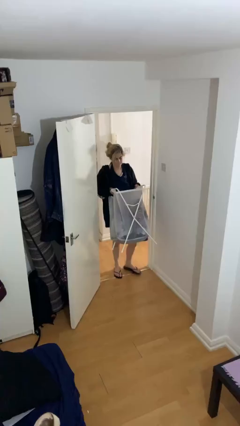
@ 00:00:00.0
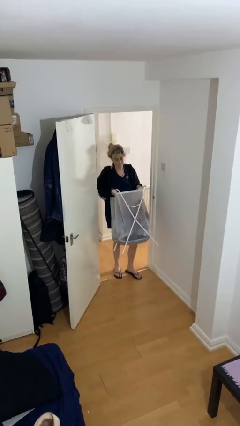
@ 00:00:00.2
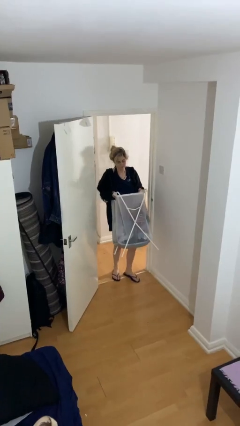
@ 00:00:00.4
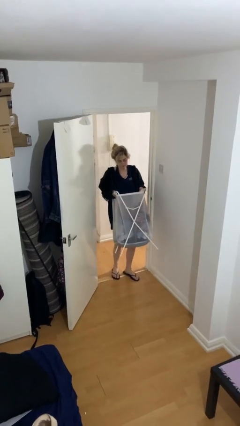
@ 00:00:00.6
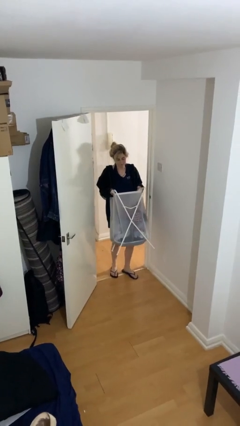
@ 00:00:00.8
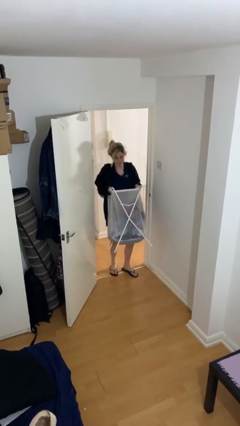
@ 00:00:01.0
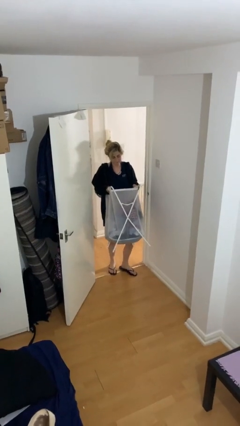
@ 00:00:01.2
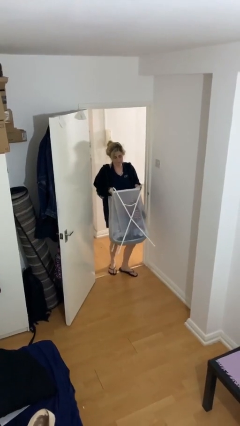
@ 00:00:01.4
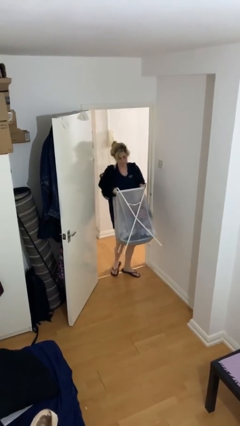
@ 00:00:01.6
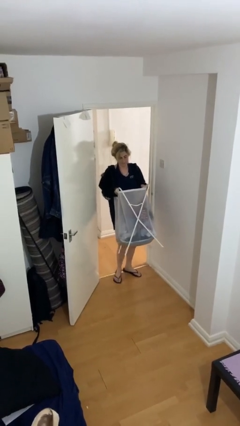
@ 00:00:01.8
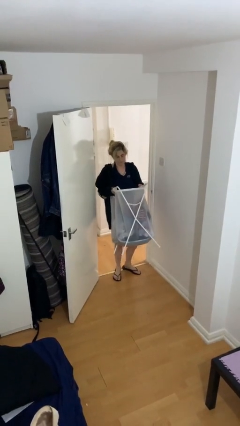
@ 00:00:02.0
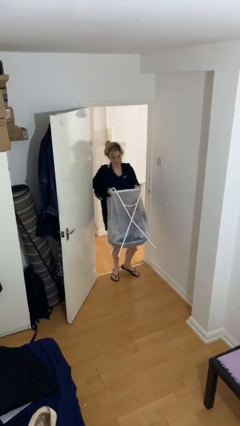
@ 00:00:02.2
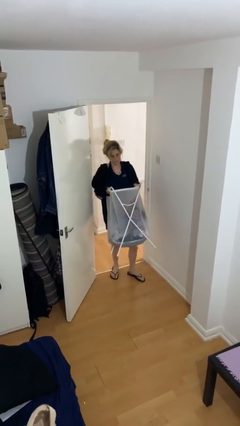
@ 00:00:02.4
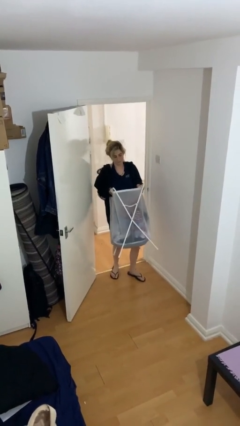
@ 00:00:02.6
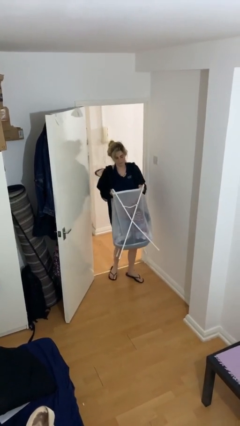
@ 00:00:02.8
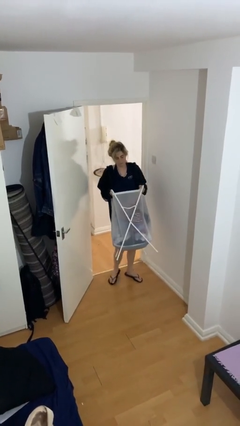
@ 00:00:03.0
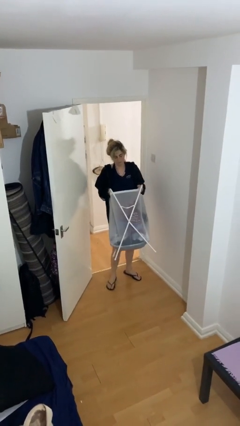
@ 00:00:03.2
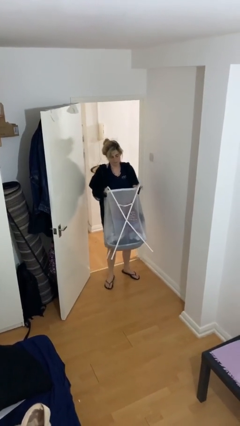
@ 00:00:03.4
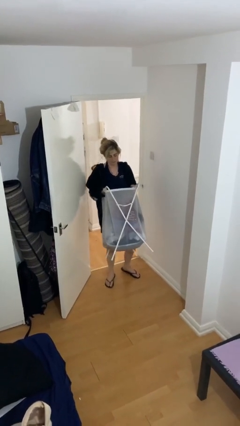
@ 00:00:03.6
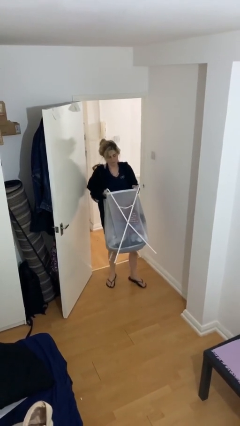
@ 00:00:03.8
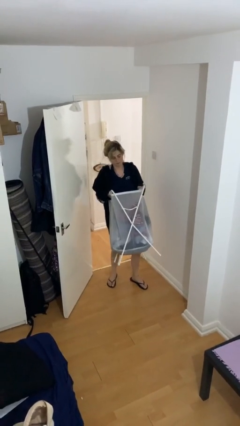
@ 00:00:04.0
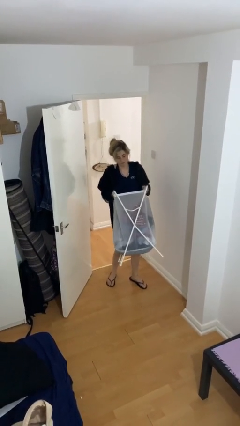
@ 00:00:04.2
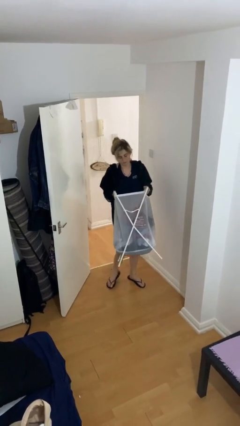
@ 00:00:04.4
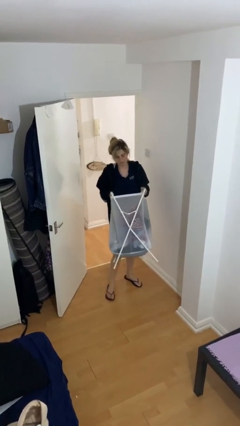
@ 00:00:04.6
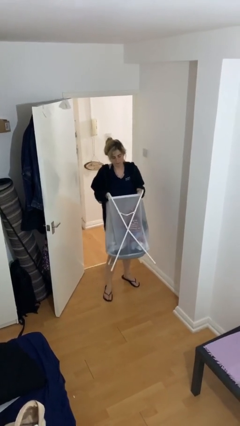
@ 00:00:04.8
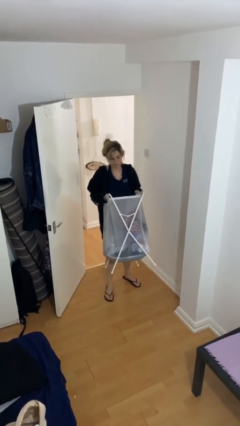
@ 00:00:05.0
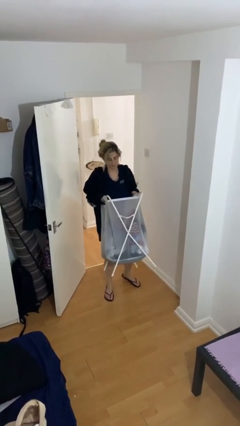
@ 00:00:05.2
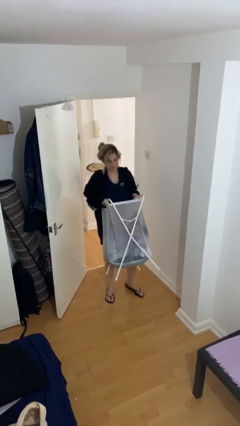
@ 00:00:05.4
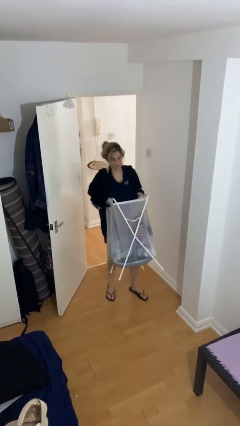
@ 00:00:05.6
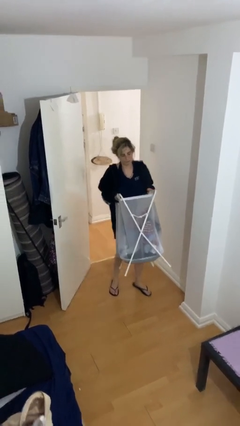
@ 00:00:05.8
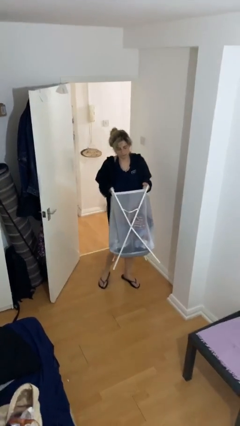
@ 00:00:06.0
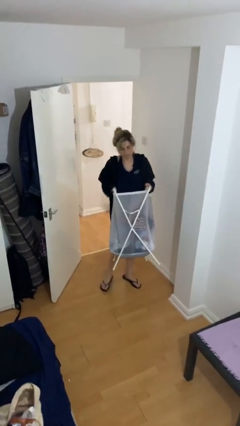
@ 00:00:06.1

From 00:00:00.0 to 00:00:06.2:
person carries heavy object

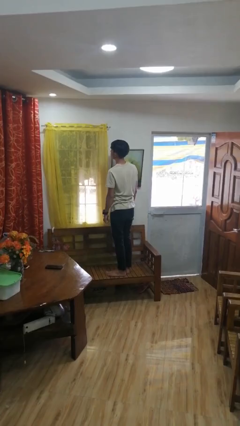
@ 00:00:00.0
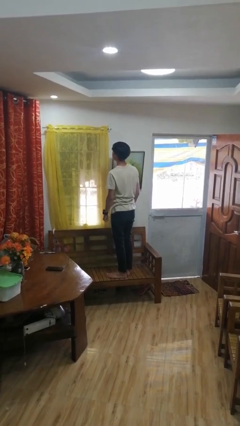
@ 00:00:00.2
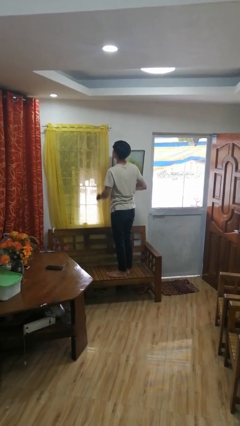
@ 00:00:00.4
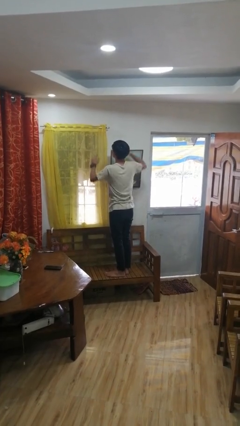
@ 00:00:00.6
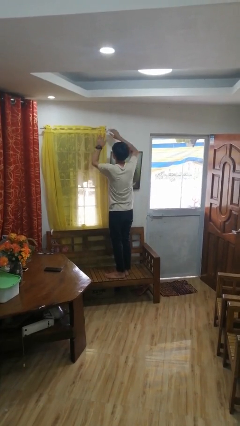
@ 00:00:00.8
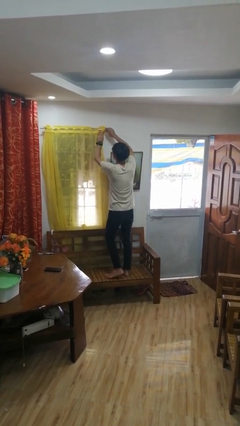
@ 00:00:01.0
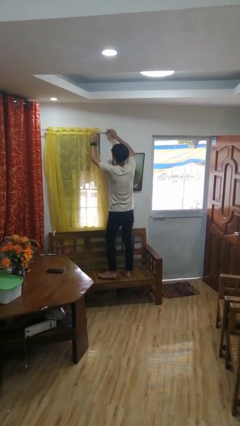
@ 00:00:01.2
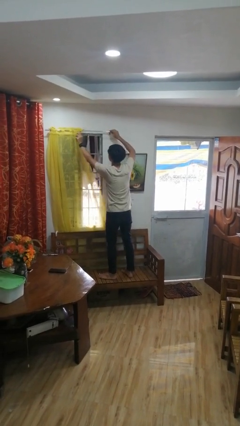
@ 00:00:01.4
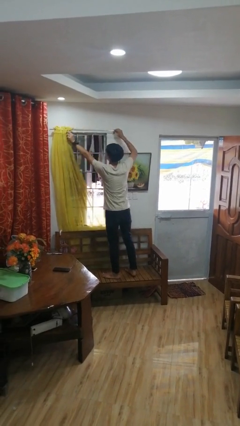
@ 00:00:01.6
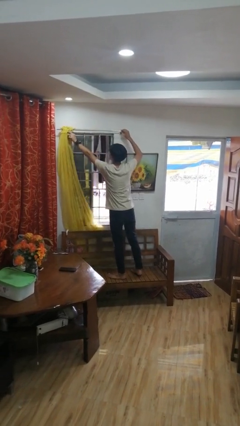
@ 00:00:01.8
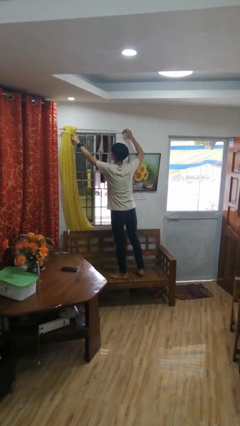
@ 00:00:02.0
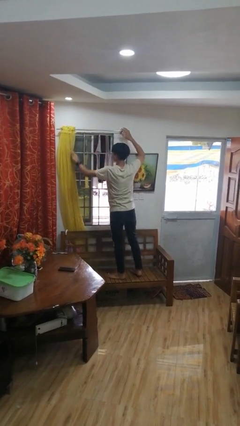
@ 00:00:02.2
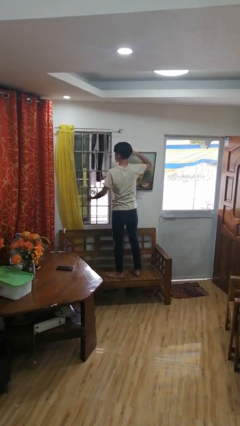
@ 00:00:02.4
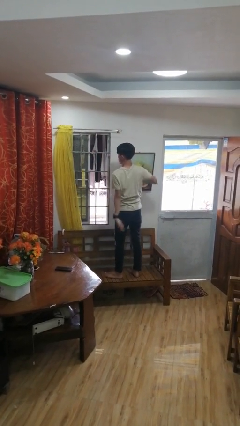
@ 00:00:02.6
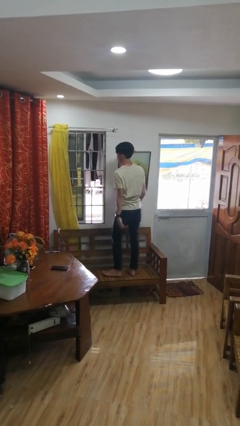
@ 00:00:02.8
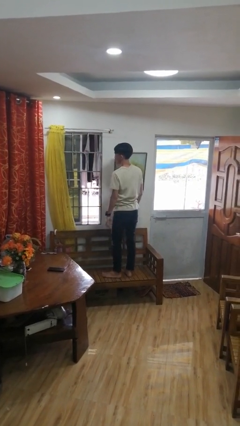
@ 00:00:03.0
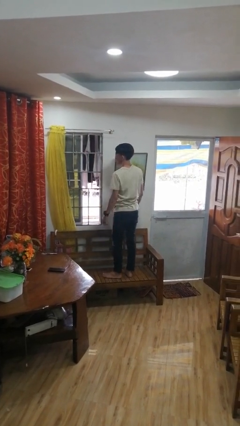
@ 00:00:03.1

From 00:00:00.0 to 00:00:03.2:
person opens curtains

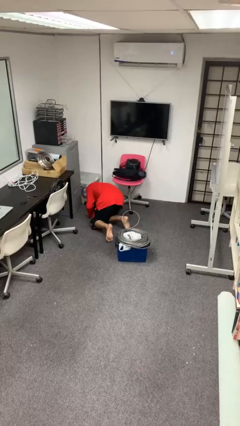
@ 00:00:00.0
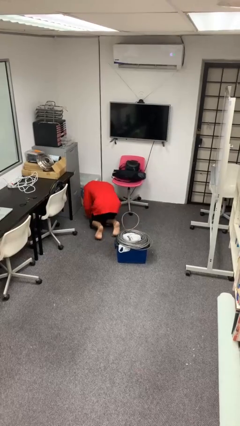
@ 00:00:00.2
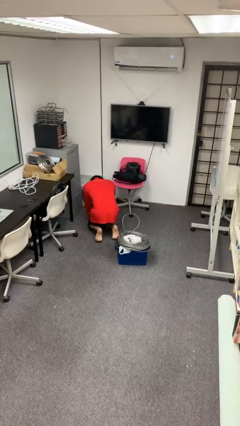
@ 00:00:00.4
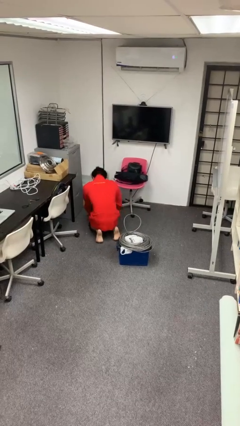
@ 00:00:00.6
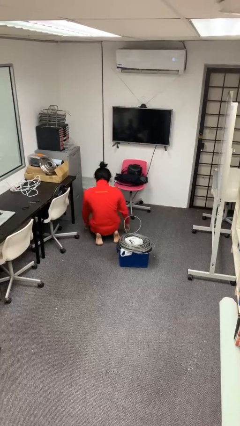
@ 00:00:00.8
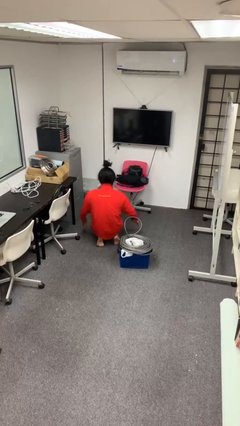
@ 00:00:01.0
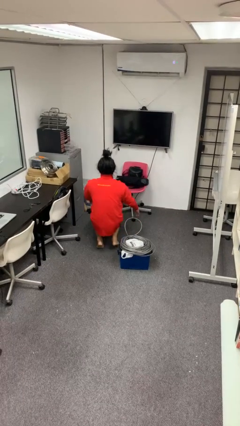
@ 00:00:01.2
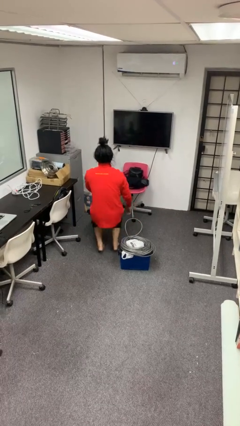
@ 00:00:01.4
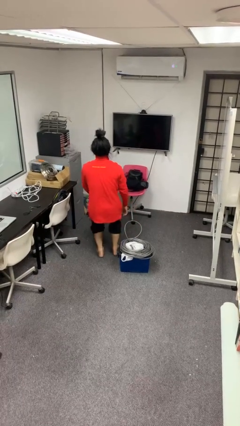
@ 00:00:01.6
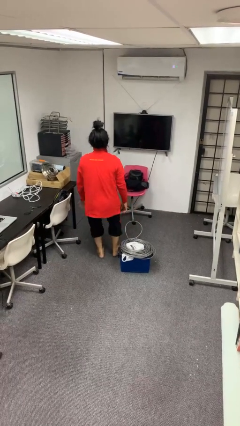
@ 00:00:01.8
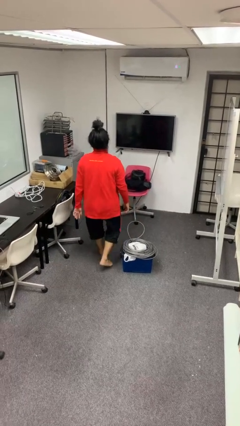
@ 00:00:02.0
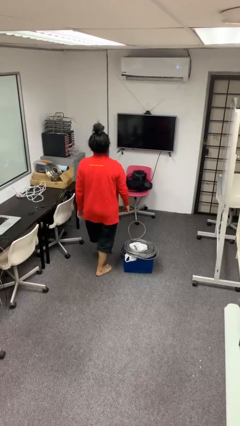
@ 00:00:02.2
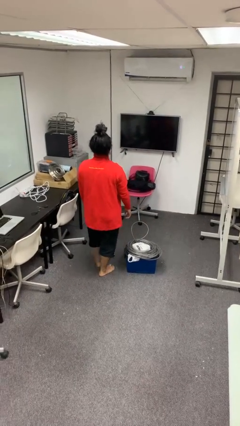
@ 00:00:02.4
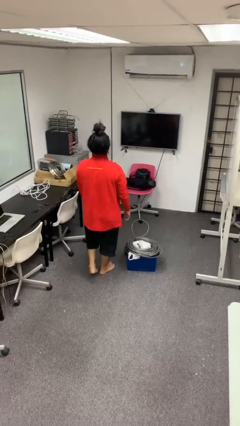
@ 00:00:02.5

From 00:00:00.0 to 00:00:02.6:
person stands up from floor

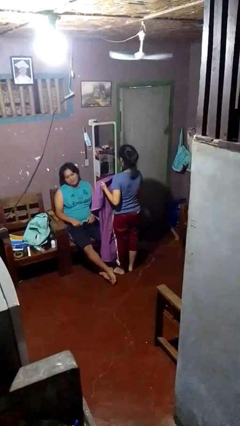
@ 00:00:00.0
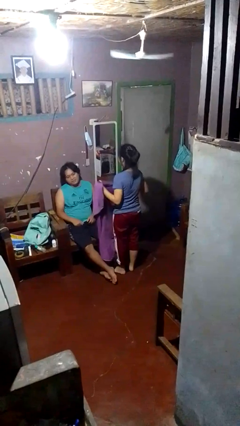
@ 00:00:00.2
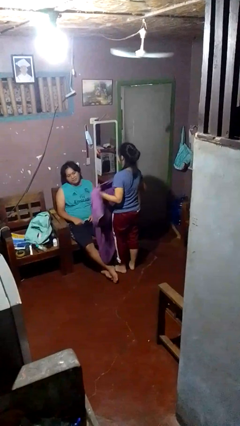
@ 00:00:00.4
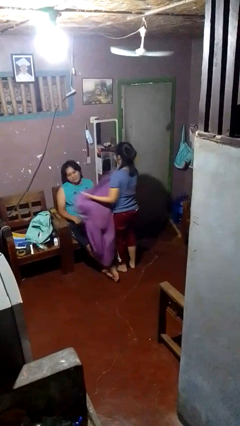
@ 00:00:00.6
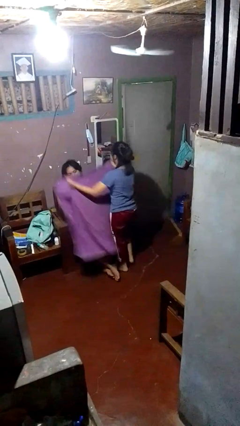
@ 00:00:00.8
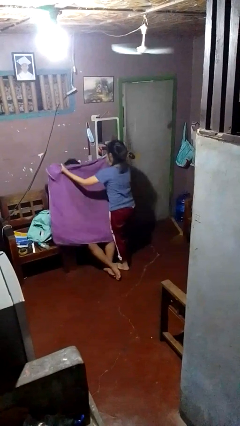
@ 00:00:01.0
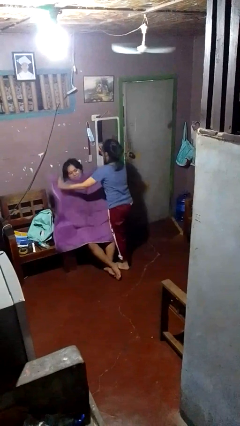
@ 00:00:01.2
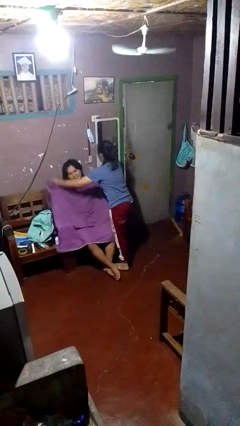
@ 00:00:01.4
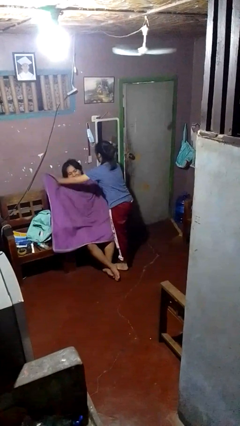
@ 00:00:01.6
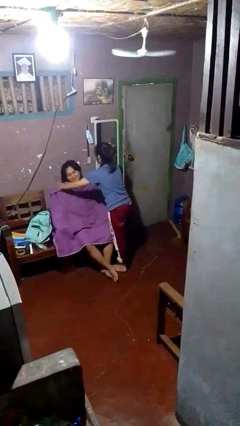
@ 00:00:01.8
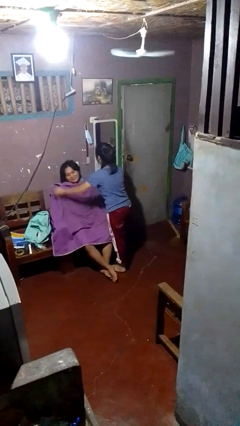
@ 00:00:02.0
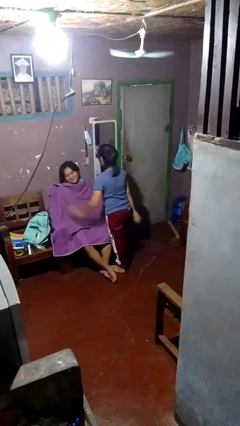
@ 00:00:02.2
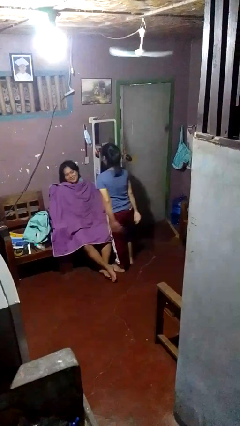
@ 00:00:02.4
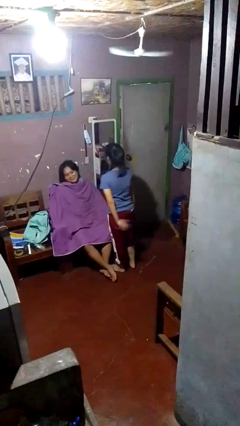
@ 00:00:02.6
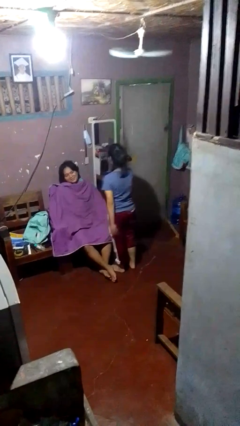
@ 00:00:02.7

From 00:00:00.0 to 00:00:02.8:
person covers friend with blanket

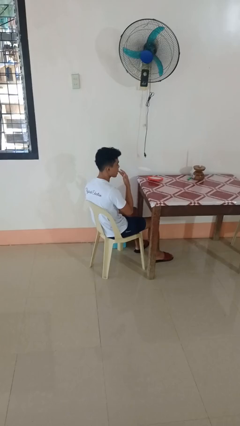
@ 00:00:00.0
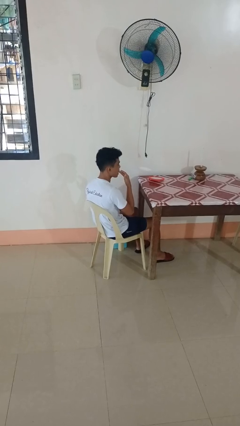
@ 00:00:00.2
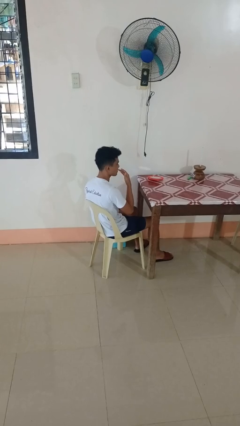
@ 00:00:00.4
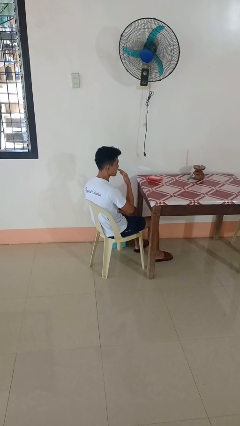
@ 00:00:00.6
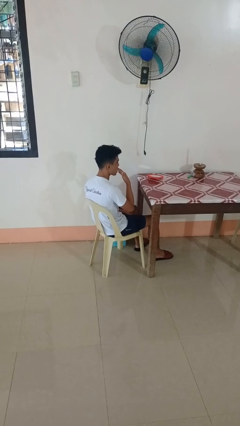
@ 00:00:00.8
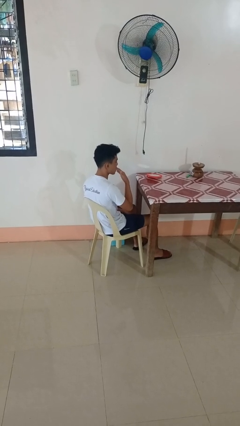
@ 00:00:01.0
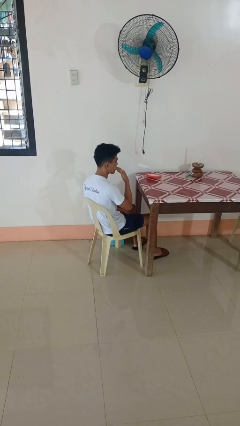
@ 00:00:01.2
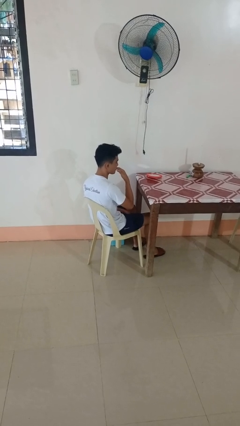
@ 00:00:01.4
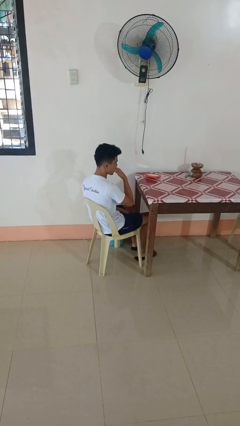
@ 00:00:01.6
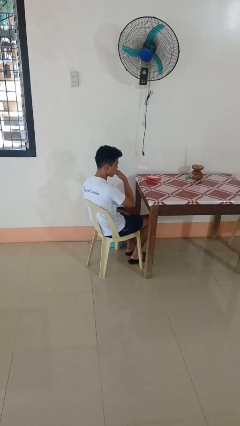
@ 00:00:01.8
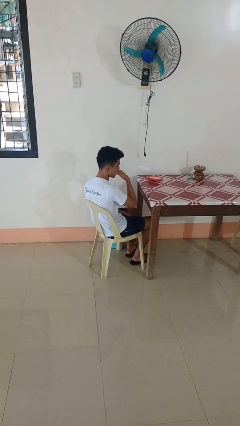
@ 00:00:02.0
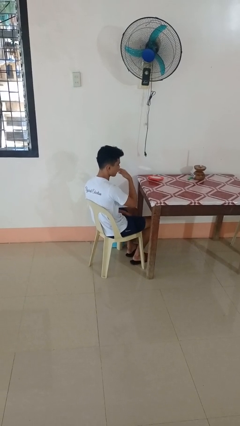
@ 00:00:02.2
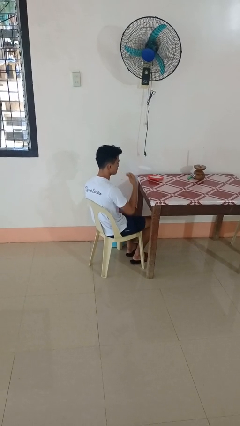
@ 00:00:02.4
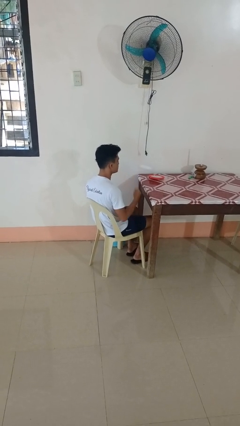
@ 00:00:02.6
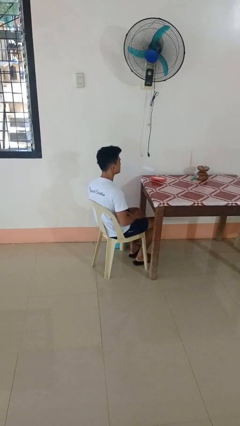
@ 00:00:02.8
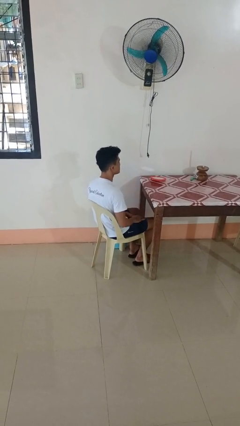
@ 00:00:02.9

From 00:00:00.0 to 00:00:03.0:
person licks fingers
